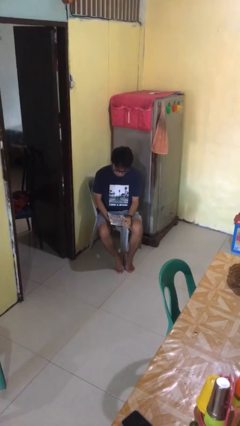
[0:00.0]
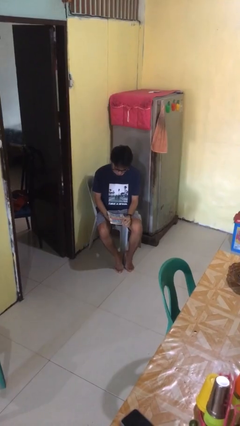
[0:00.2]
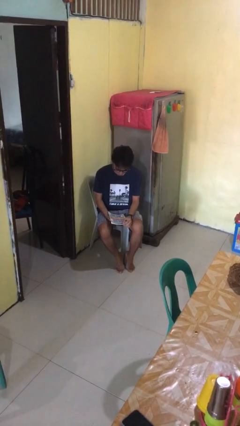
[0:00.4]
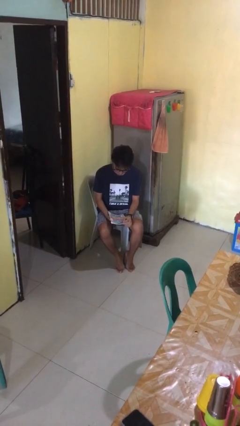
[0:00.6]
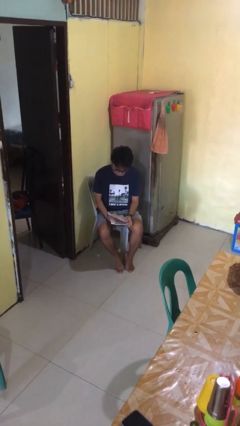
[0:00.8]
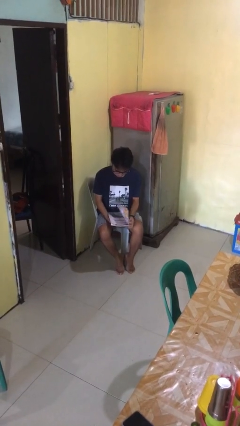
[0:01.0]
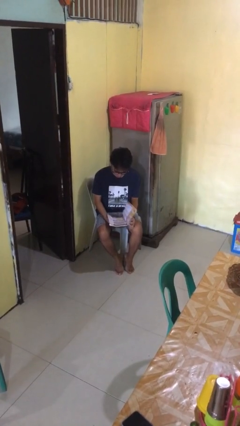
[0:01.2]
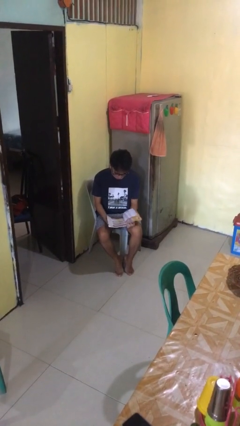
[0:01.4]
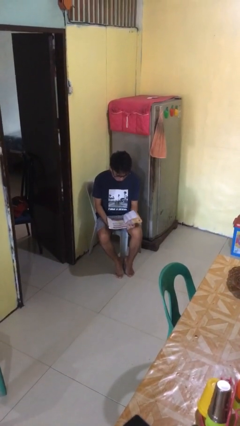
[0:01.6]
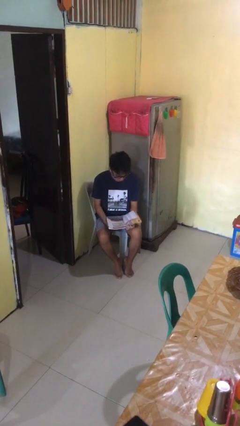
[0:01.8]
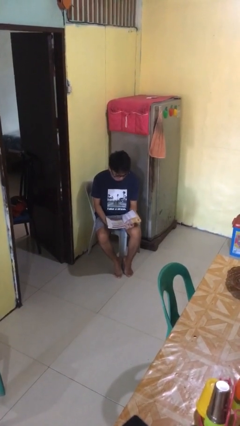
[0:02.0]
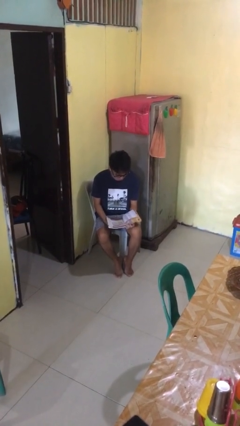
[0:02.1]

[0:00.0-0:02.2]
person reads magazine

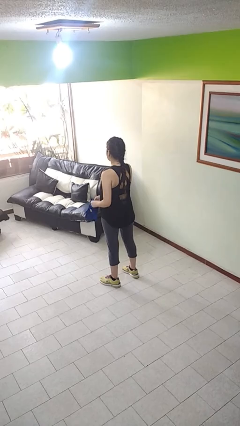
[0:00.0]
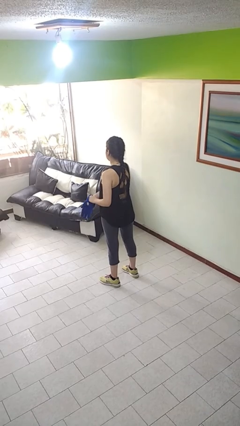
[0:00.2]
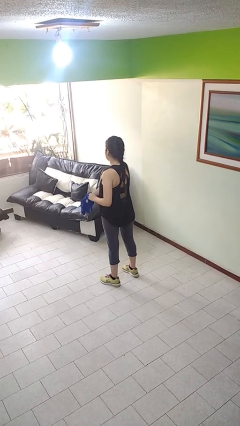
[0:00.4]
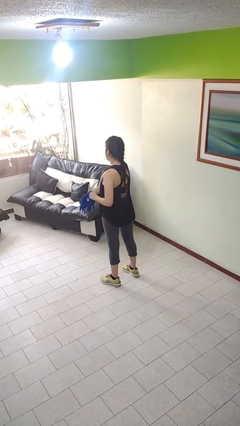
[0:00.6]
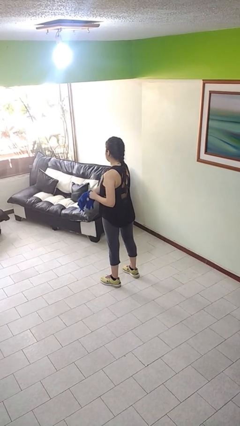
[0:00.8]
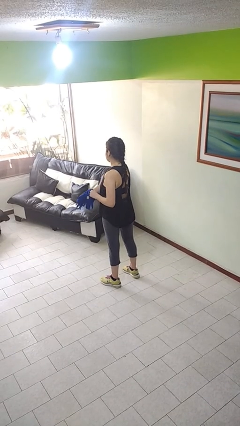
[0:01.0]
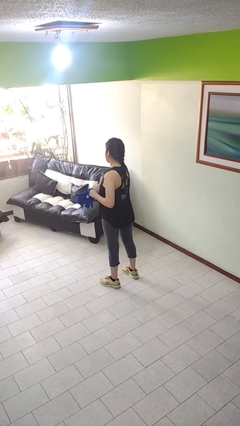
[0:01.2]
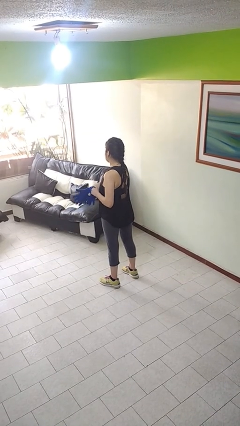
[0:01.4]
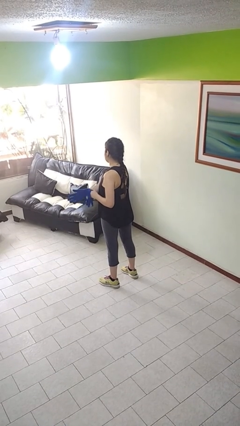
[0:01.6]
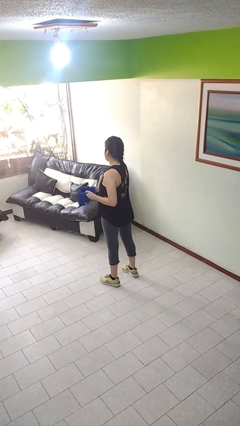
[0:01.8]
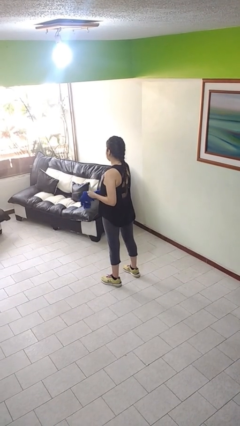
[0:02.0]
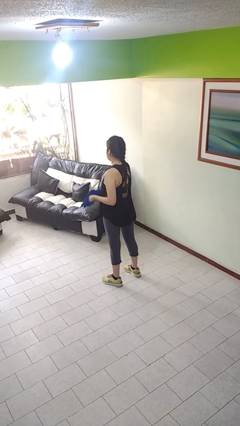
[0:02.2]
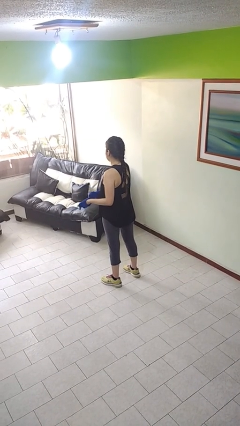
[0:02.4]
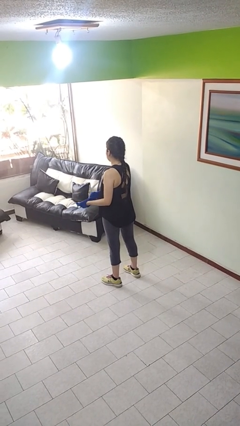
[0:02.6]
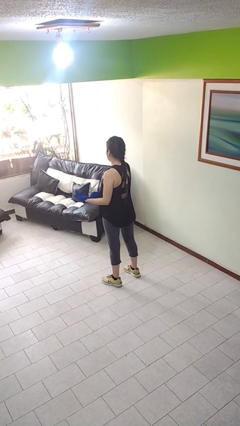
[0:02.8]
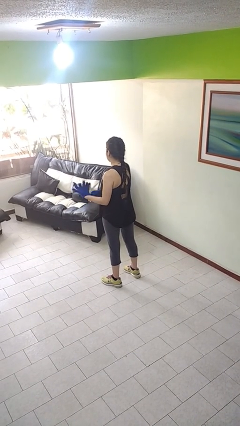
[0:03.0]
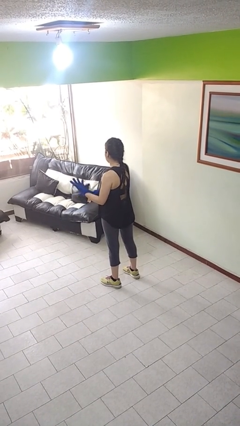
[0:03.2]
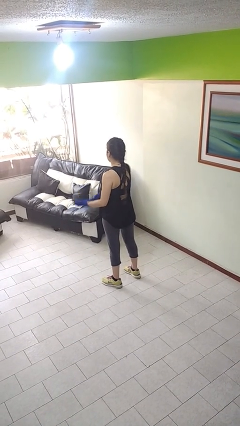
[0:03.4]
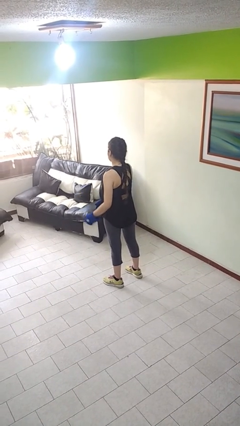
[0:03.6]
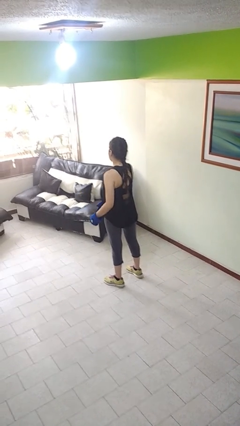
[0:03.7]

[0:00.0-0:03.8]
person puts on gloves

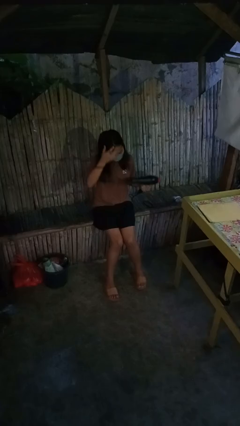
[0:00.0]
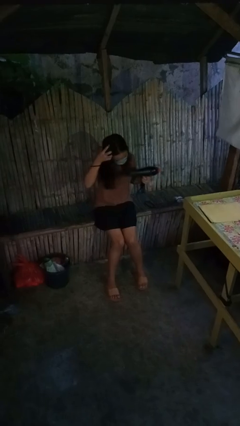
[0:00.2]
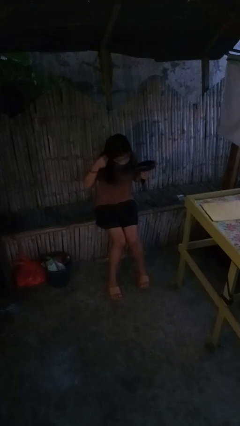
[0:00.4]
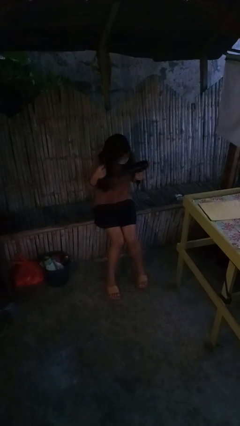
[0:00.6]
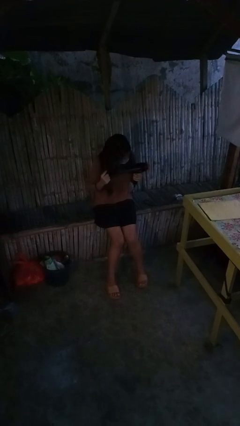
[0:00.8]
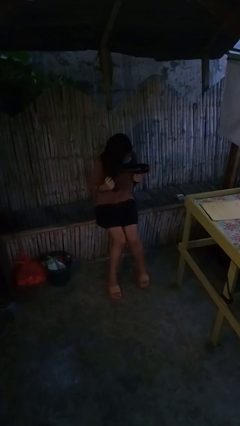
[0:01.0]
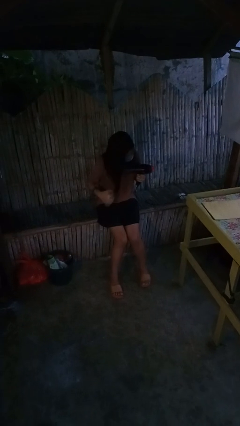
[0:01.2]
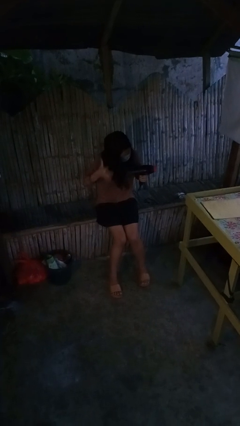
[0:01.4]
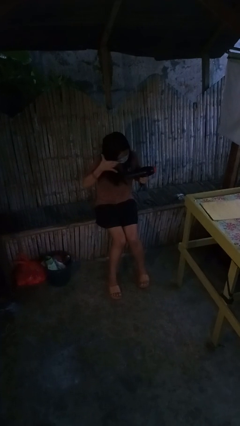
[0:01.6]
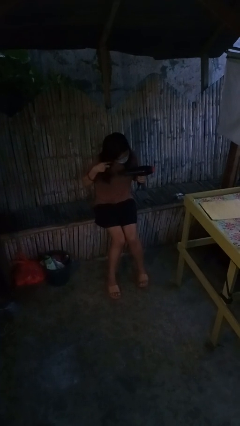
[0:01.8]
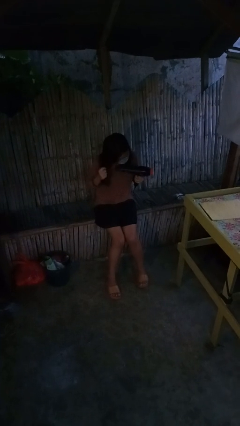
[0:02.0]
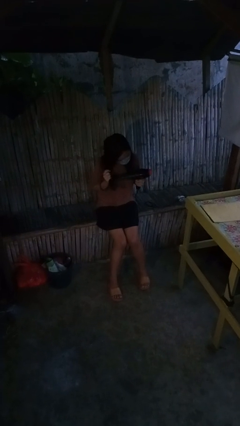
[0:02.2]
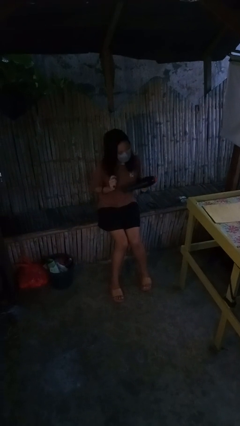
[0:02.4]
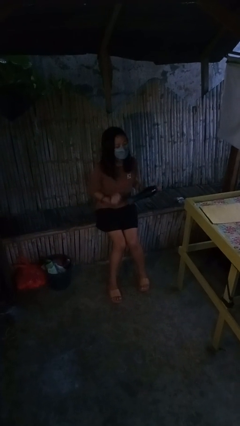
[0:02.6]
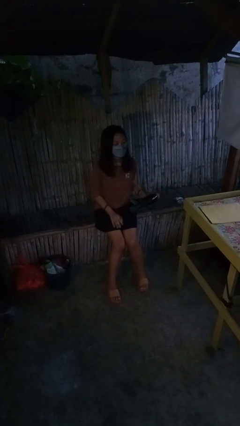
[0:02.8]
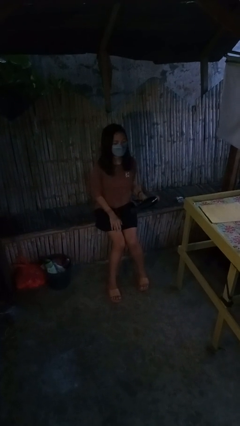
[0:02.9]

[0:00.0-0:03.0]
person dries hair with hairdryer

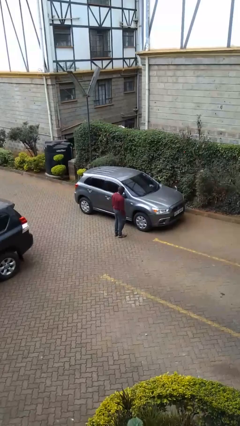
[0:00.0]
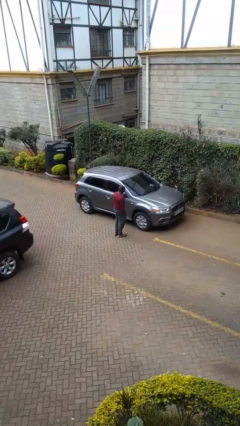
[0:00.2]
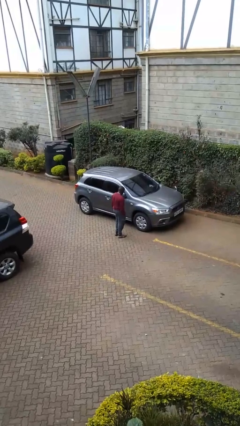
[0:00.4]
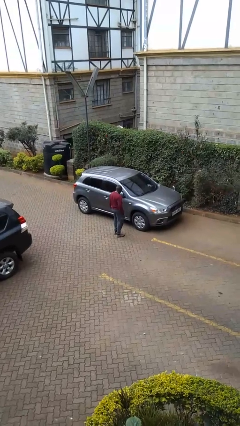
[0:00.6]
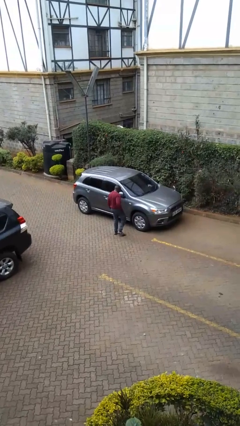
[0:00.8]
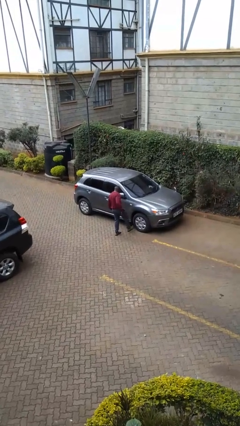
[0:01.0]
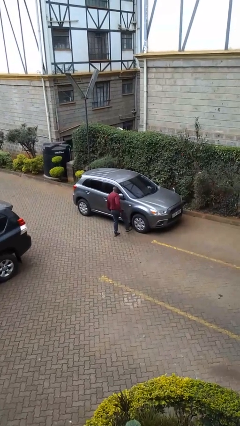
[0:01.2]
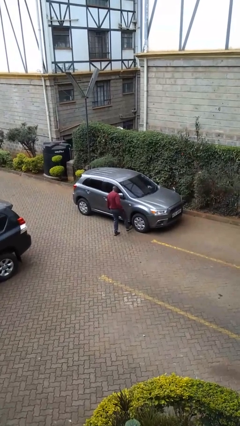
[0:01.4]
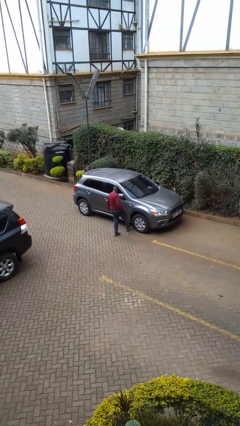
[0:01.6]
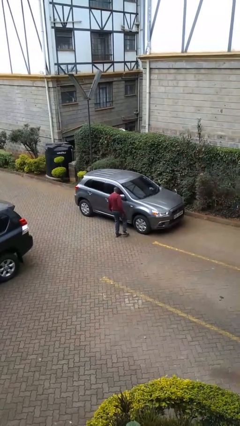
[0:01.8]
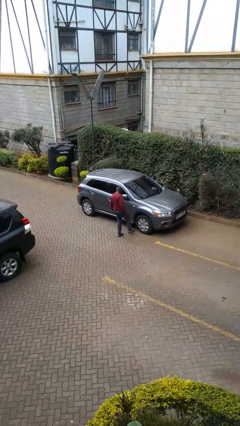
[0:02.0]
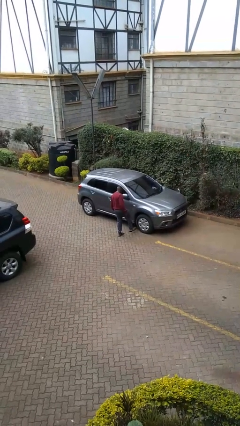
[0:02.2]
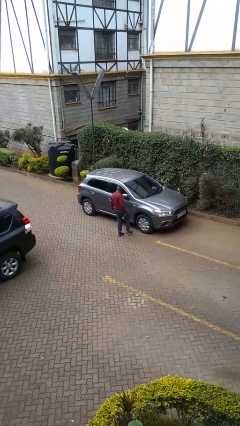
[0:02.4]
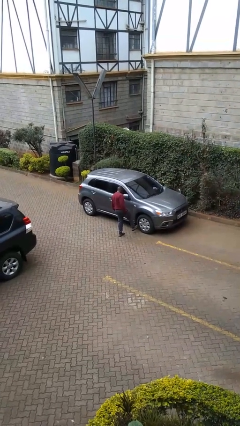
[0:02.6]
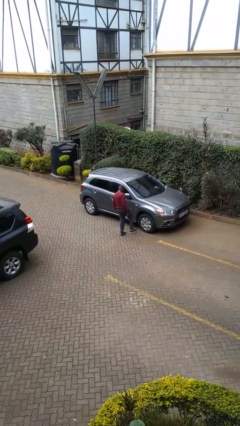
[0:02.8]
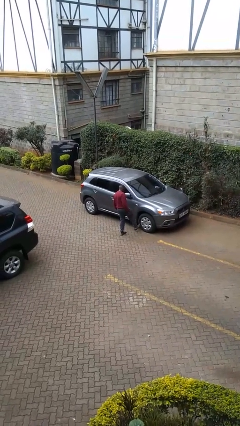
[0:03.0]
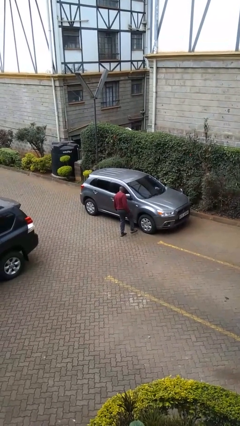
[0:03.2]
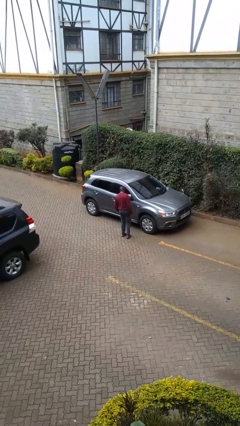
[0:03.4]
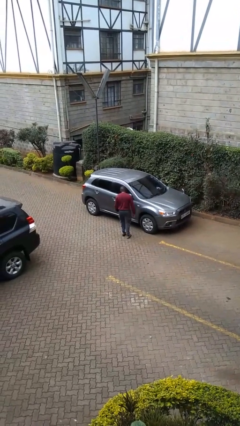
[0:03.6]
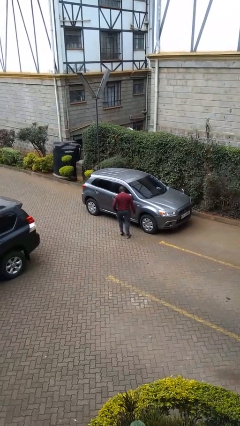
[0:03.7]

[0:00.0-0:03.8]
person kicks car tires

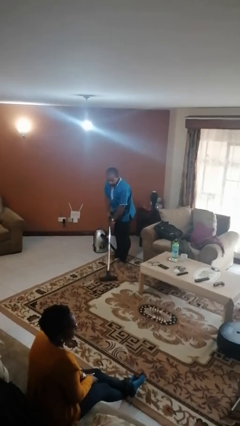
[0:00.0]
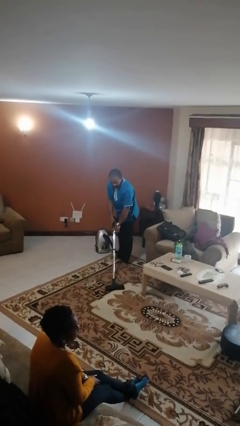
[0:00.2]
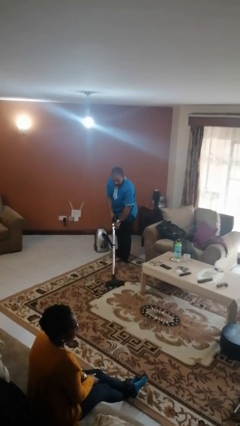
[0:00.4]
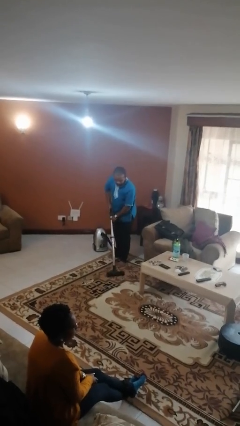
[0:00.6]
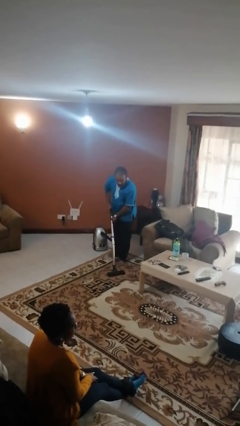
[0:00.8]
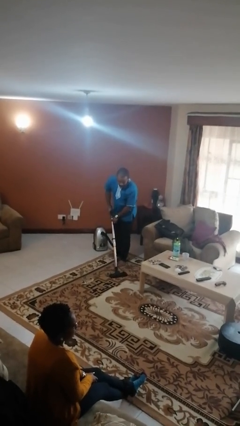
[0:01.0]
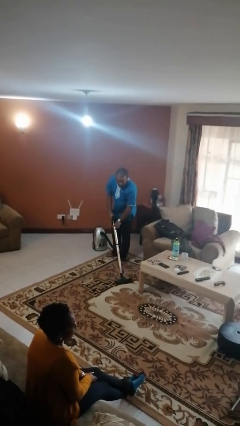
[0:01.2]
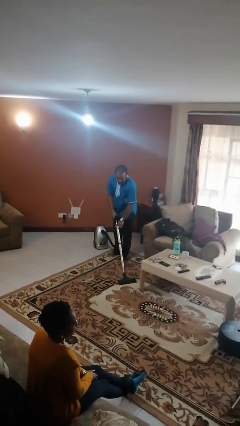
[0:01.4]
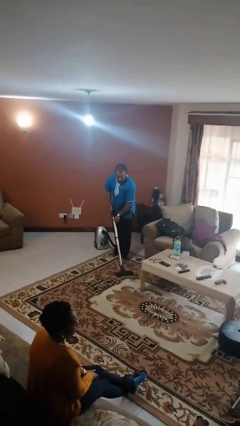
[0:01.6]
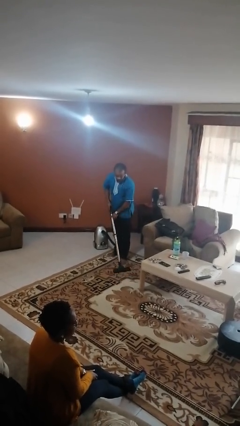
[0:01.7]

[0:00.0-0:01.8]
person vacuums carpet

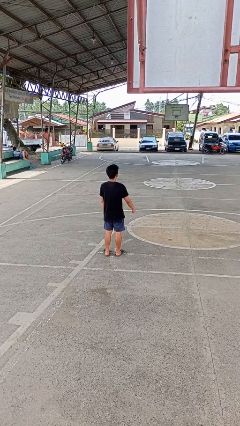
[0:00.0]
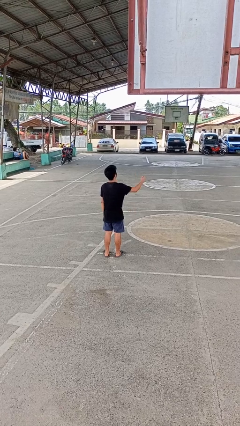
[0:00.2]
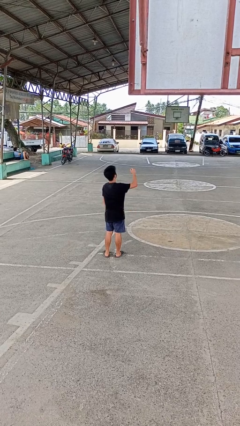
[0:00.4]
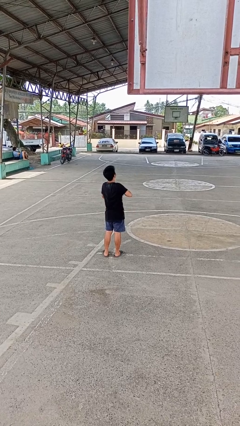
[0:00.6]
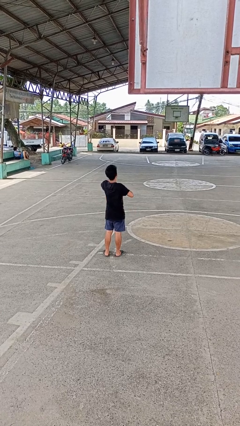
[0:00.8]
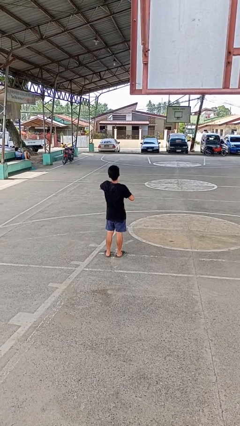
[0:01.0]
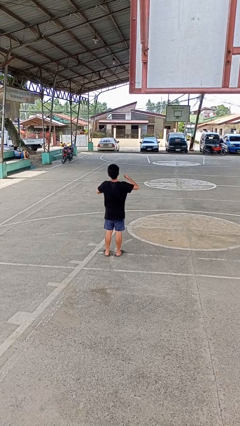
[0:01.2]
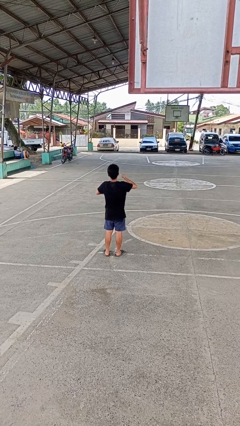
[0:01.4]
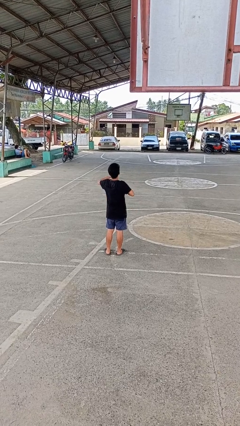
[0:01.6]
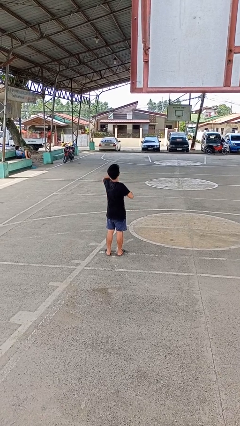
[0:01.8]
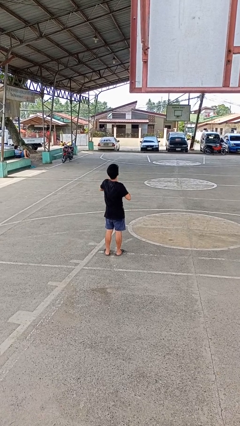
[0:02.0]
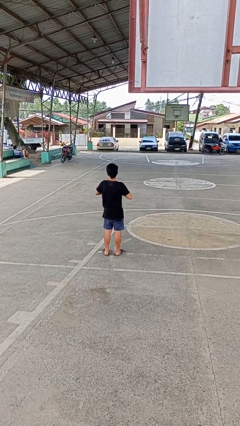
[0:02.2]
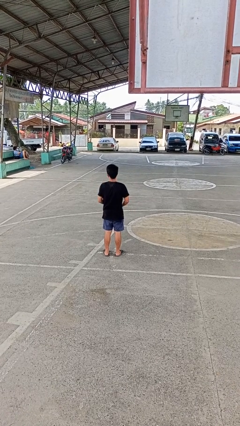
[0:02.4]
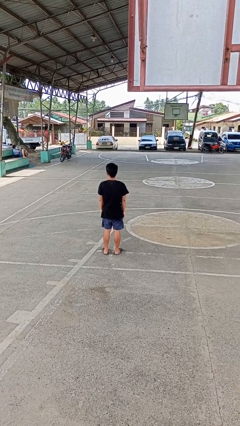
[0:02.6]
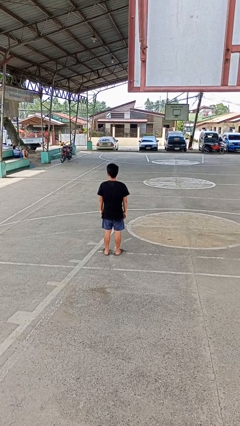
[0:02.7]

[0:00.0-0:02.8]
person drums on chest

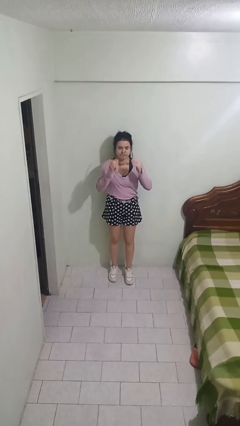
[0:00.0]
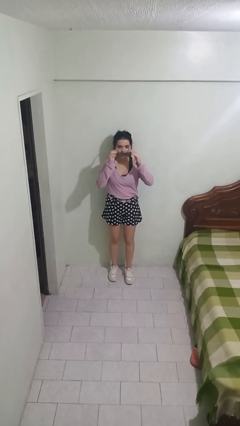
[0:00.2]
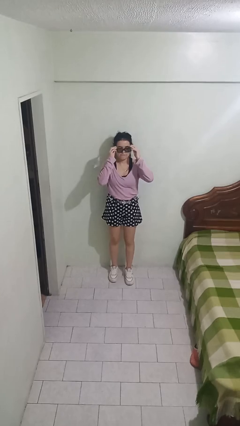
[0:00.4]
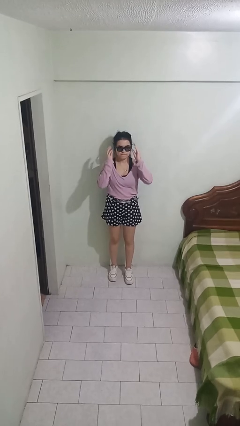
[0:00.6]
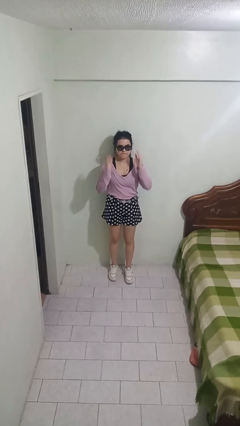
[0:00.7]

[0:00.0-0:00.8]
person puts on sunglasses
